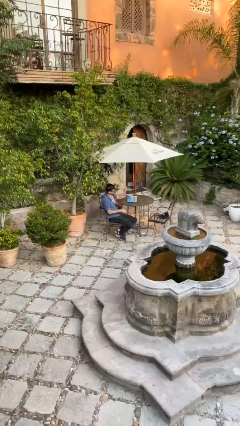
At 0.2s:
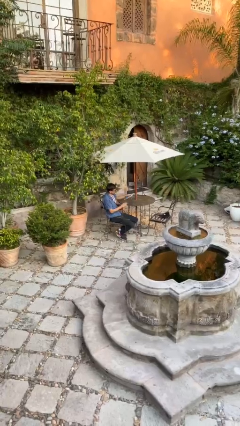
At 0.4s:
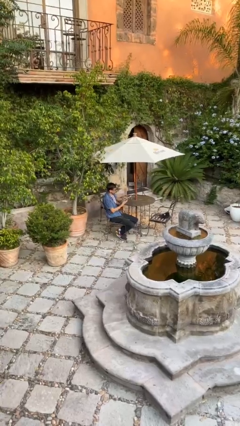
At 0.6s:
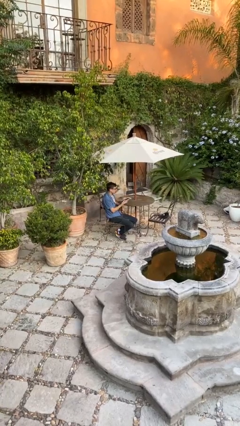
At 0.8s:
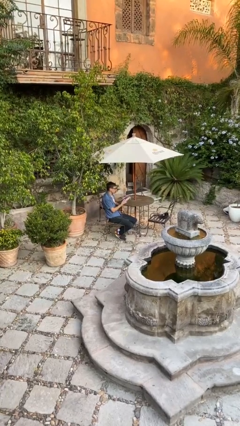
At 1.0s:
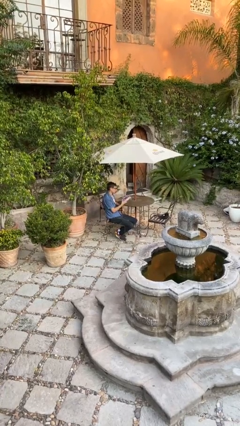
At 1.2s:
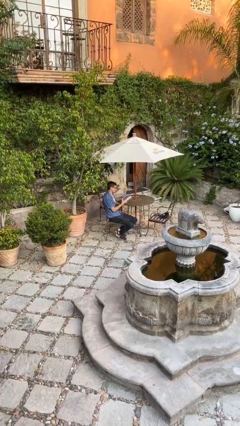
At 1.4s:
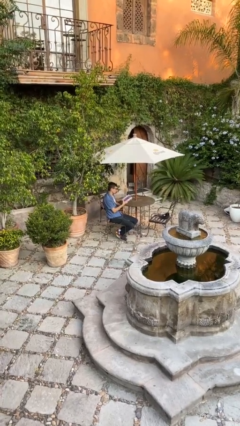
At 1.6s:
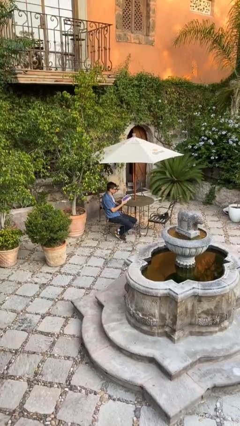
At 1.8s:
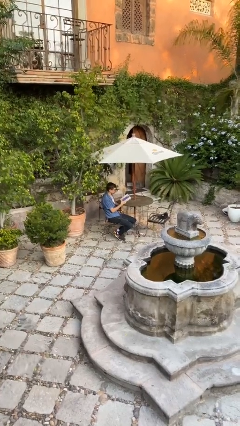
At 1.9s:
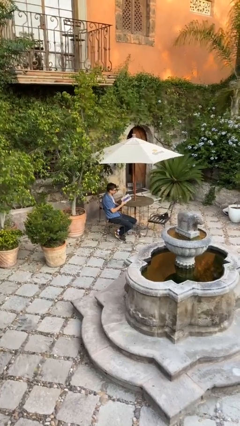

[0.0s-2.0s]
person picks up object from table

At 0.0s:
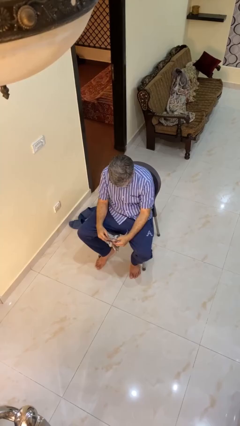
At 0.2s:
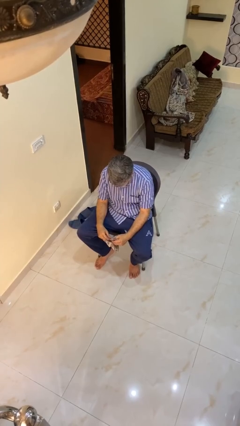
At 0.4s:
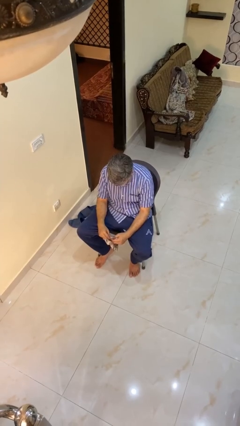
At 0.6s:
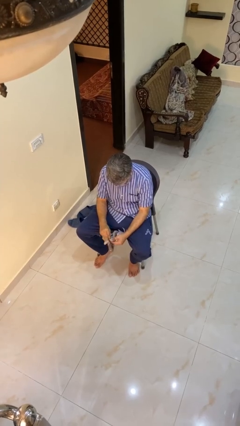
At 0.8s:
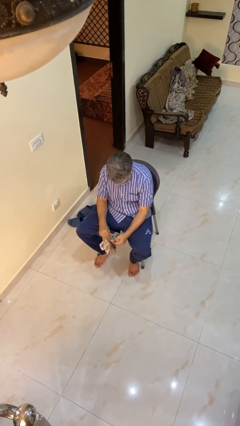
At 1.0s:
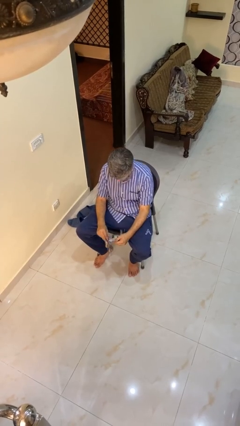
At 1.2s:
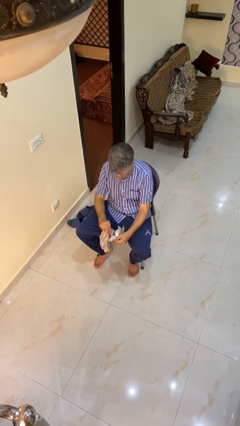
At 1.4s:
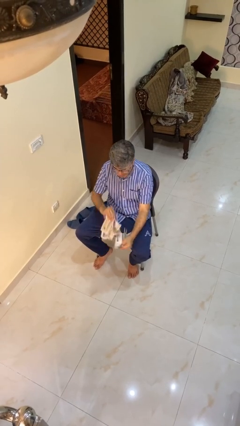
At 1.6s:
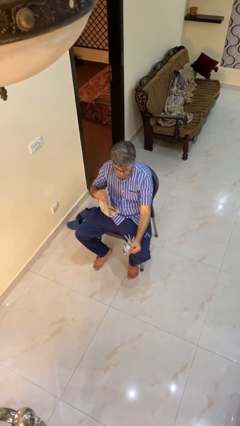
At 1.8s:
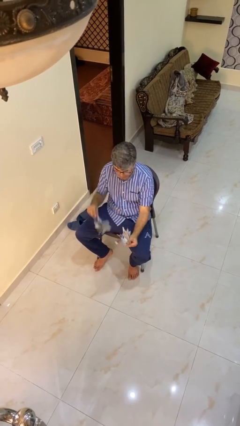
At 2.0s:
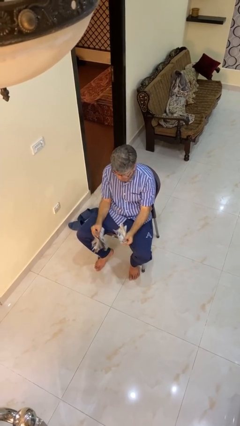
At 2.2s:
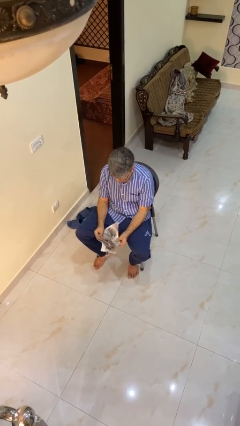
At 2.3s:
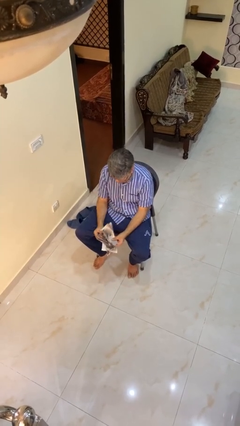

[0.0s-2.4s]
person tears paper

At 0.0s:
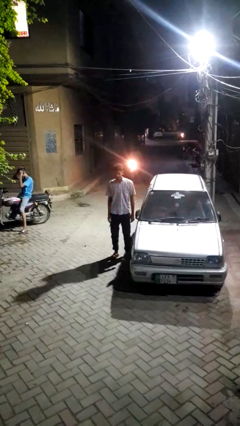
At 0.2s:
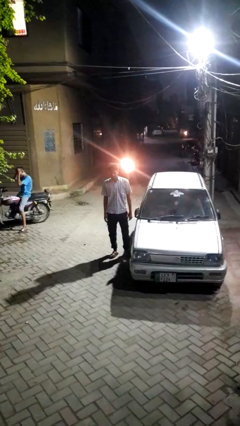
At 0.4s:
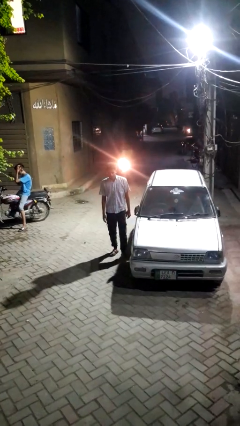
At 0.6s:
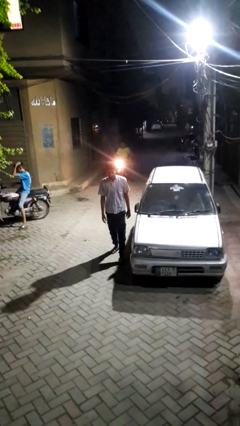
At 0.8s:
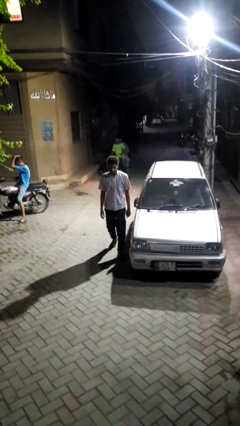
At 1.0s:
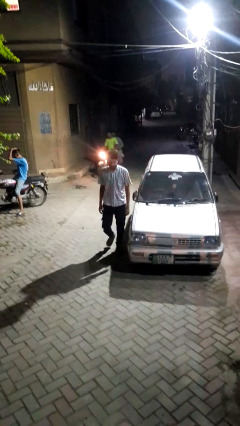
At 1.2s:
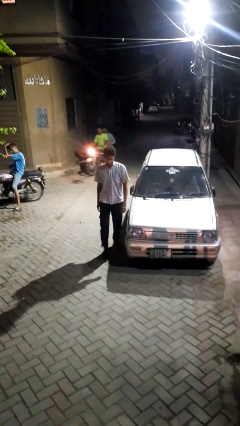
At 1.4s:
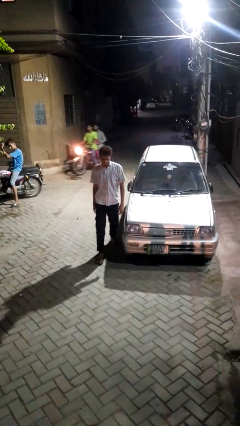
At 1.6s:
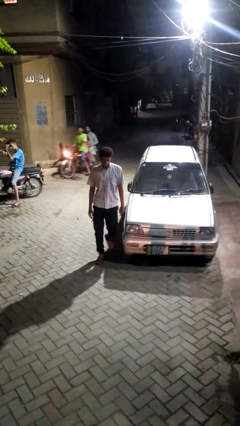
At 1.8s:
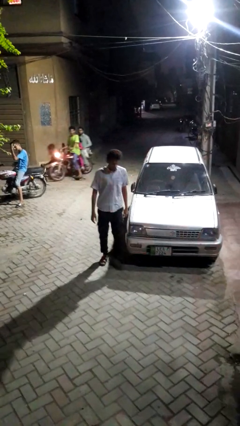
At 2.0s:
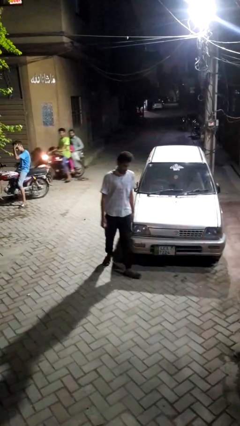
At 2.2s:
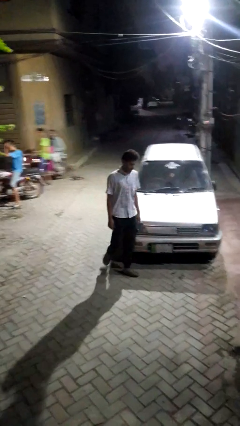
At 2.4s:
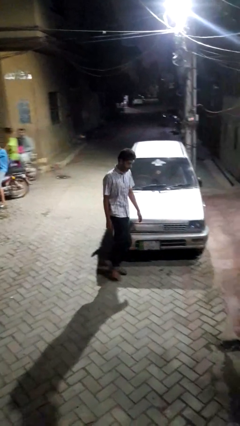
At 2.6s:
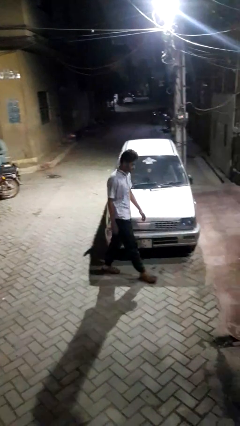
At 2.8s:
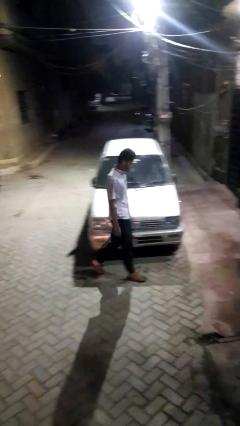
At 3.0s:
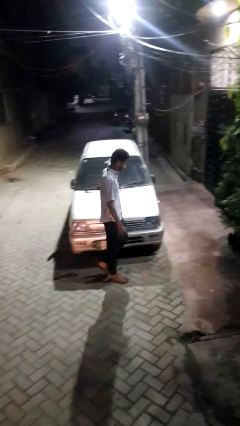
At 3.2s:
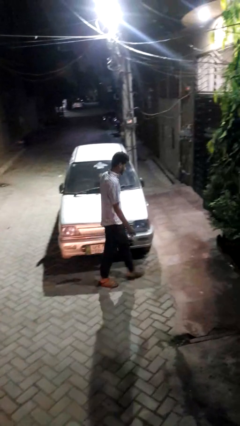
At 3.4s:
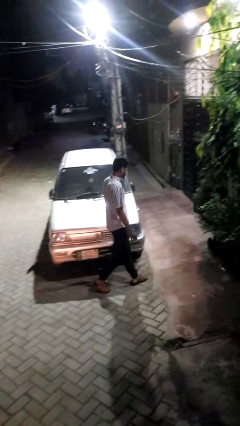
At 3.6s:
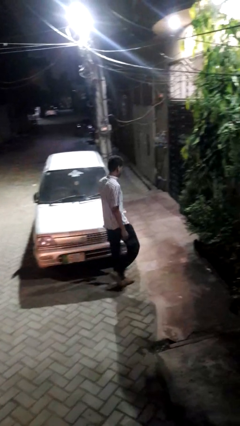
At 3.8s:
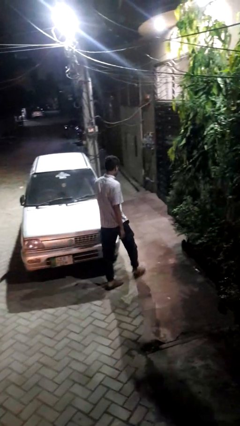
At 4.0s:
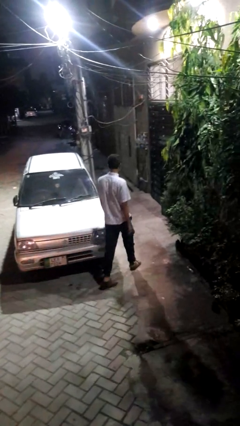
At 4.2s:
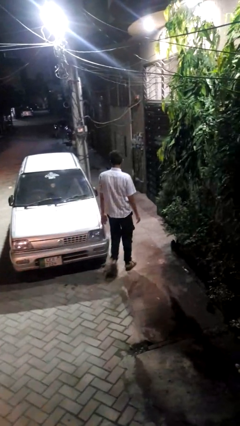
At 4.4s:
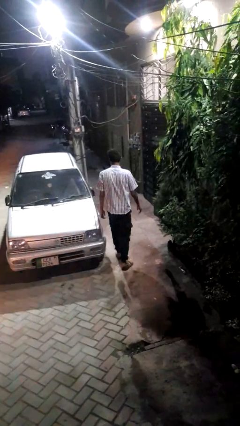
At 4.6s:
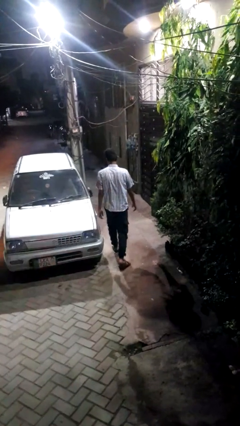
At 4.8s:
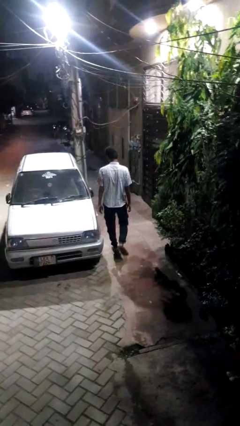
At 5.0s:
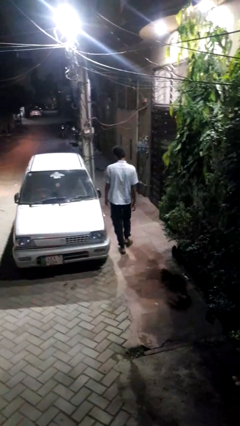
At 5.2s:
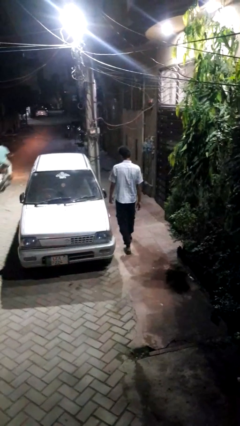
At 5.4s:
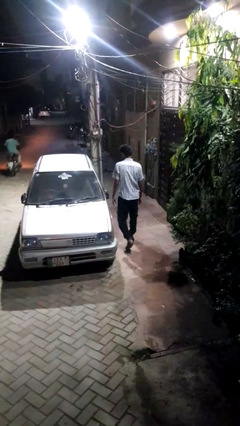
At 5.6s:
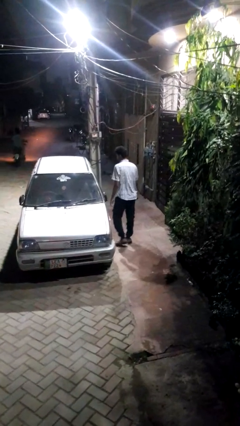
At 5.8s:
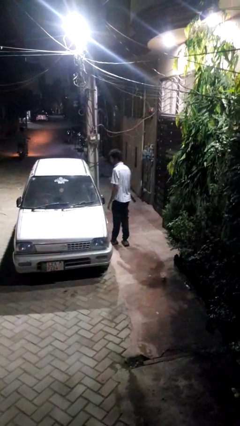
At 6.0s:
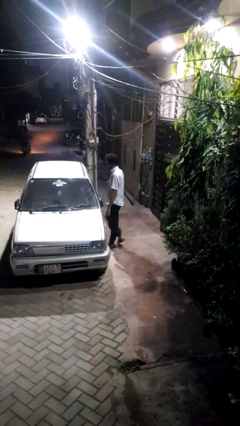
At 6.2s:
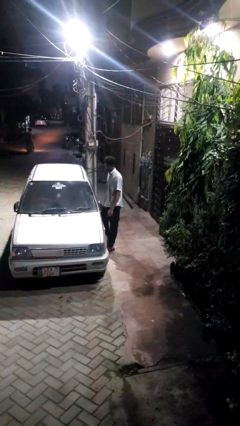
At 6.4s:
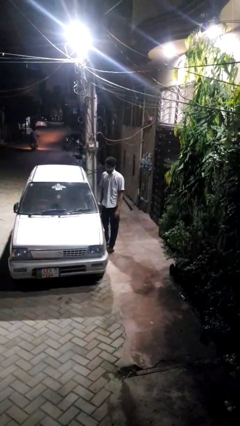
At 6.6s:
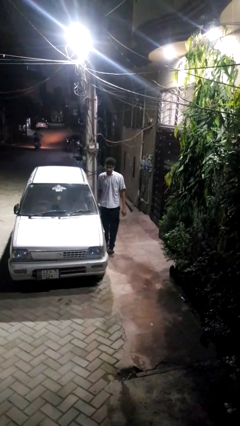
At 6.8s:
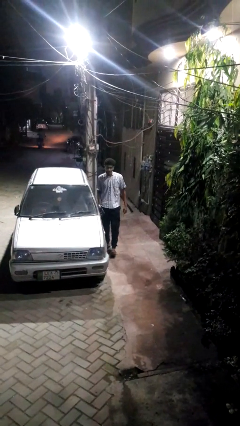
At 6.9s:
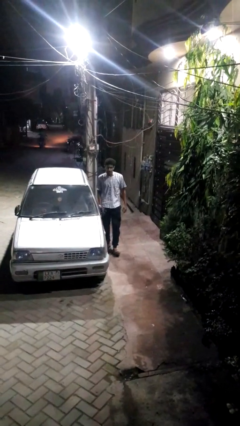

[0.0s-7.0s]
person walks around car

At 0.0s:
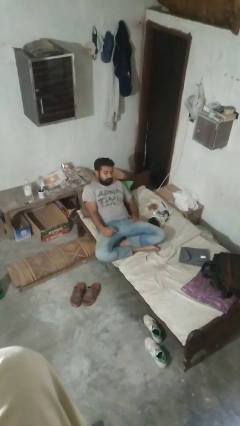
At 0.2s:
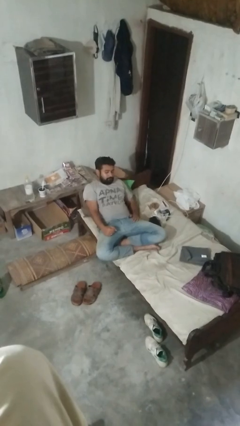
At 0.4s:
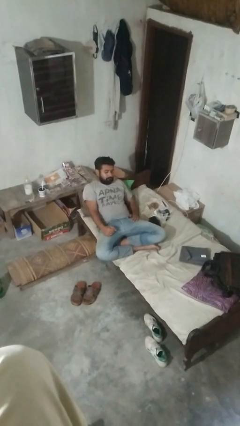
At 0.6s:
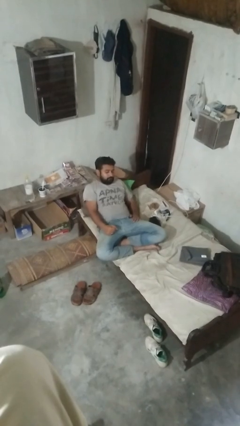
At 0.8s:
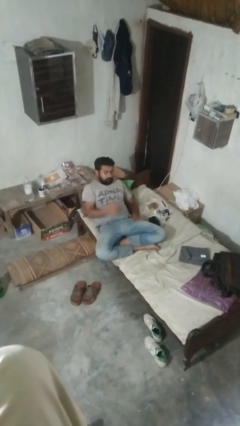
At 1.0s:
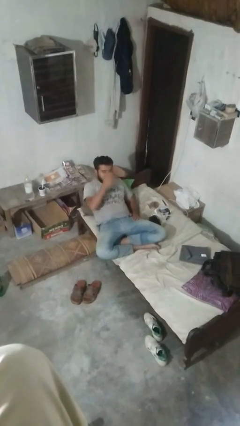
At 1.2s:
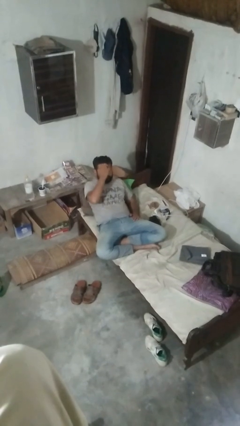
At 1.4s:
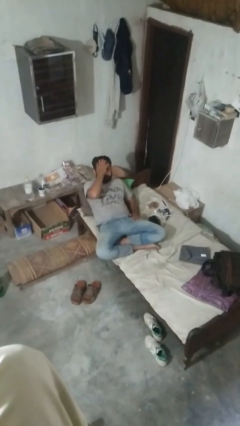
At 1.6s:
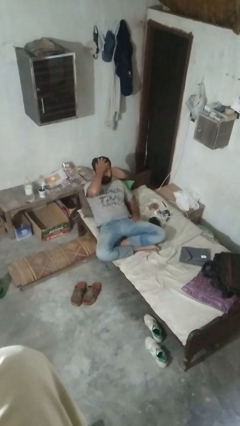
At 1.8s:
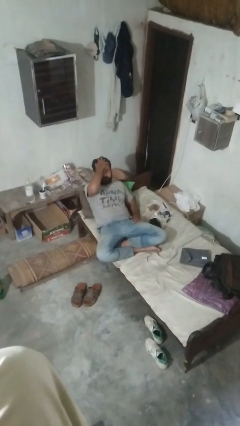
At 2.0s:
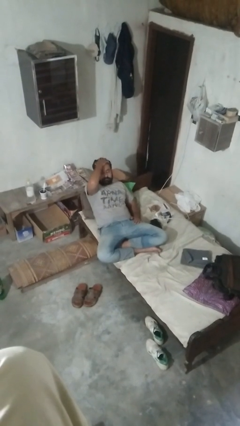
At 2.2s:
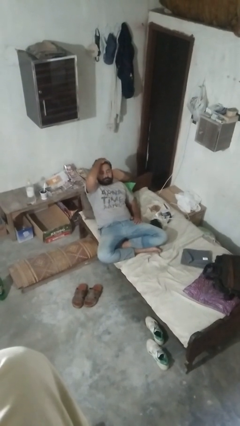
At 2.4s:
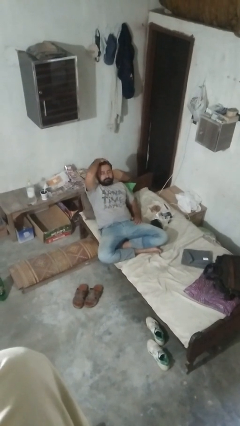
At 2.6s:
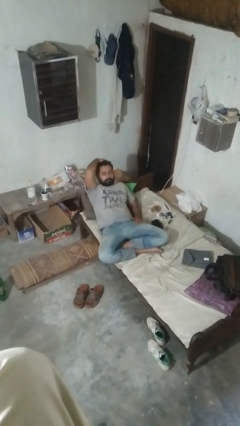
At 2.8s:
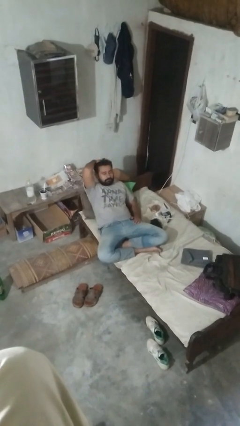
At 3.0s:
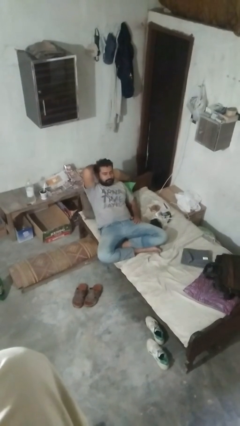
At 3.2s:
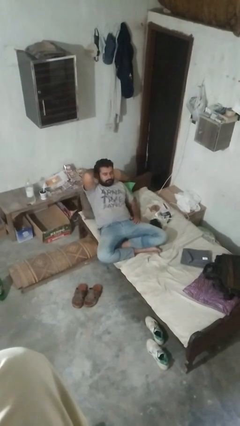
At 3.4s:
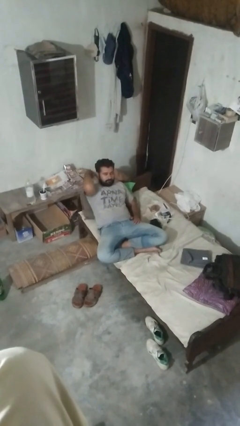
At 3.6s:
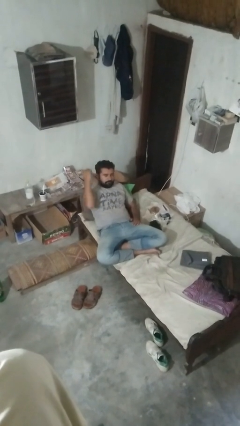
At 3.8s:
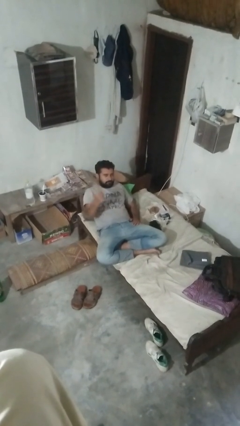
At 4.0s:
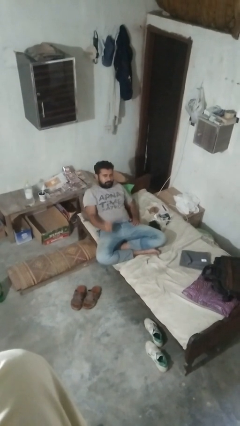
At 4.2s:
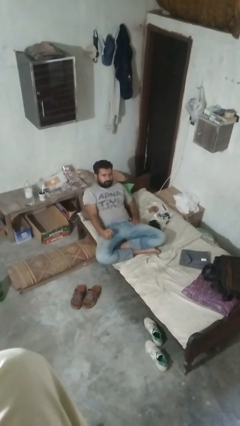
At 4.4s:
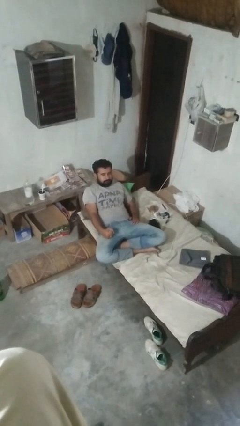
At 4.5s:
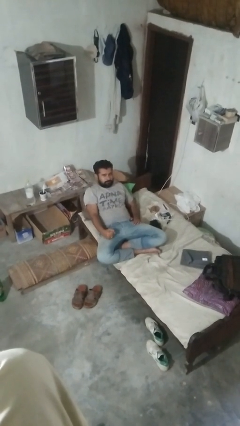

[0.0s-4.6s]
person strokes hair

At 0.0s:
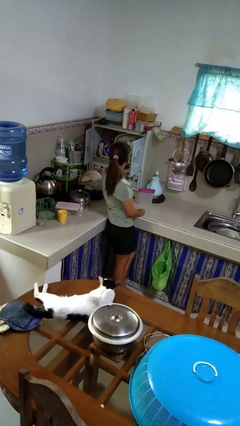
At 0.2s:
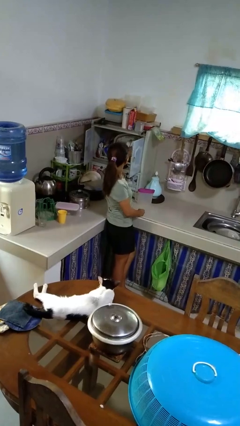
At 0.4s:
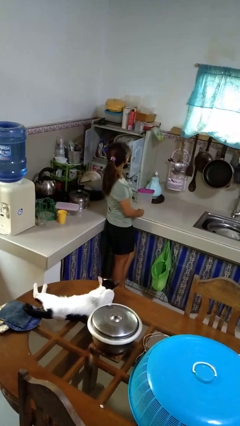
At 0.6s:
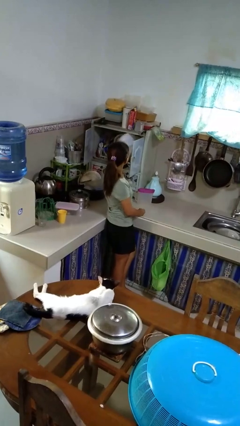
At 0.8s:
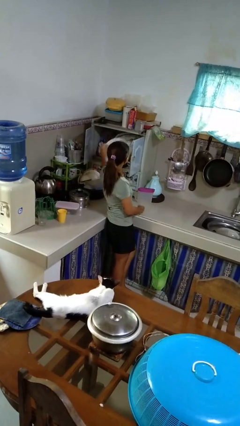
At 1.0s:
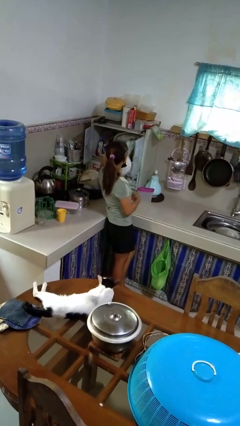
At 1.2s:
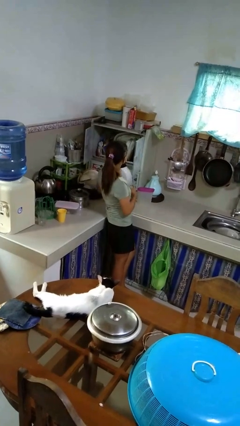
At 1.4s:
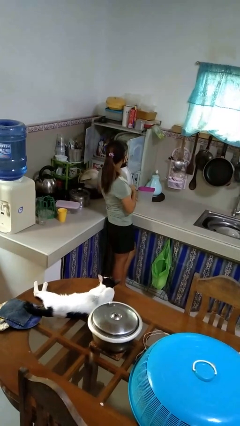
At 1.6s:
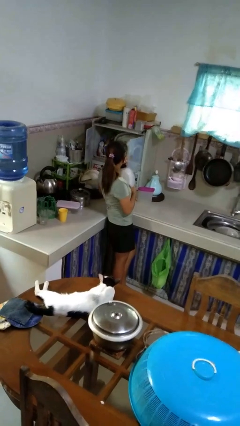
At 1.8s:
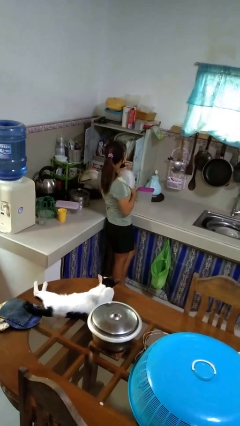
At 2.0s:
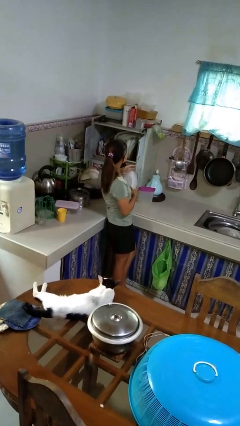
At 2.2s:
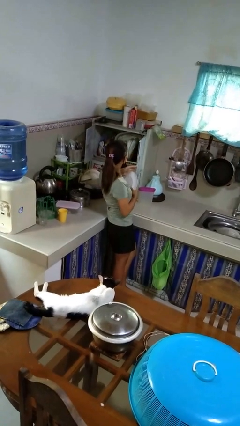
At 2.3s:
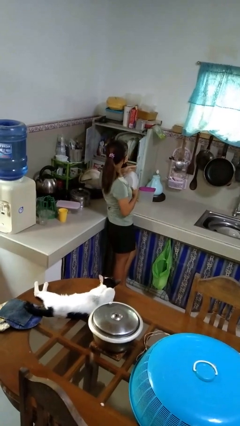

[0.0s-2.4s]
person takes object from kitchen drawer
